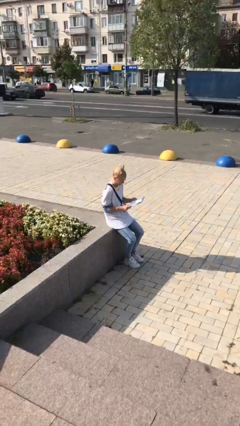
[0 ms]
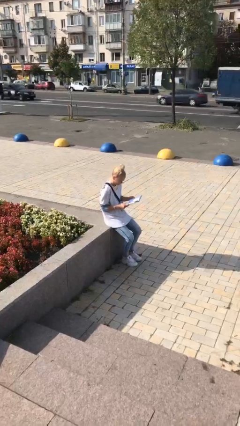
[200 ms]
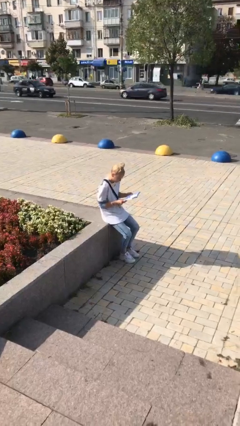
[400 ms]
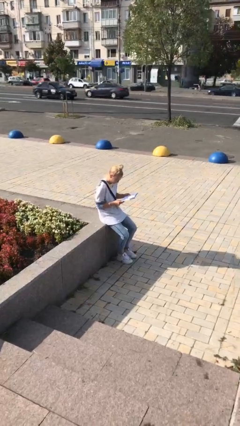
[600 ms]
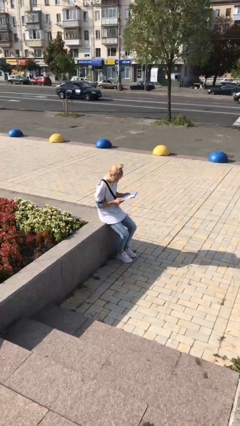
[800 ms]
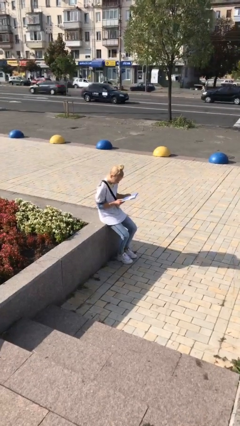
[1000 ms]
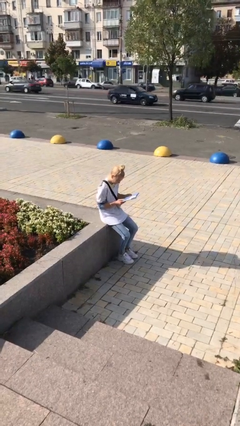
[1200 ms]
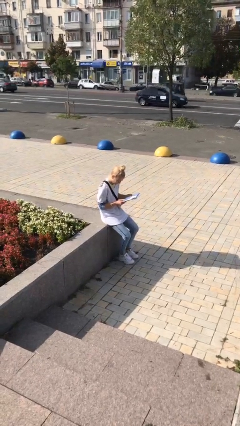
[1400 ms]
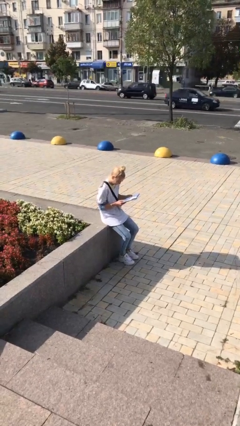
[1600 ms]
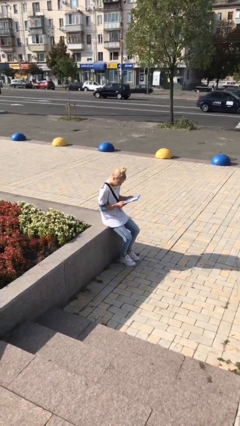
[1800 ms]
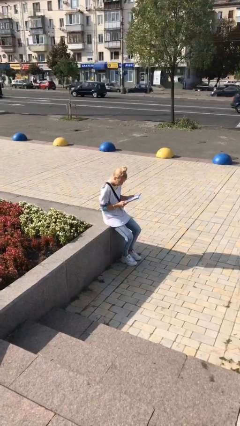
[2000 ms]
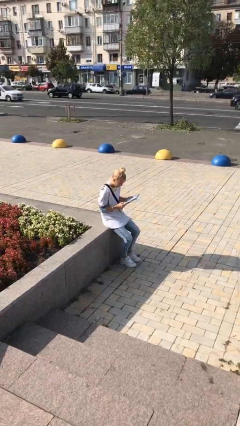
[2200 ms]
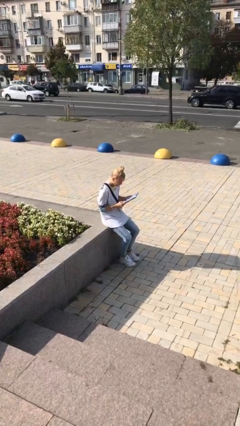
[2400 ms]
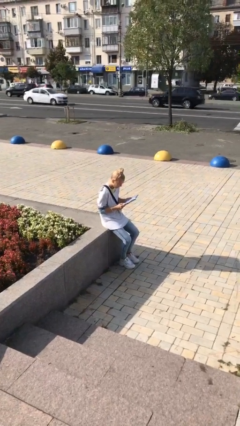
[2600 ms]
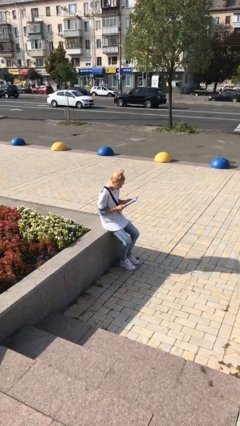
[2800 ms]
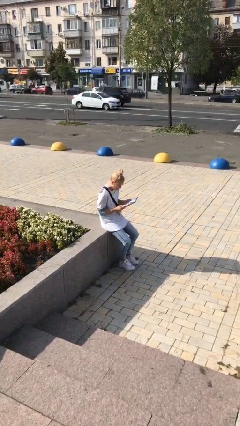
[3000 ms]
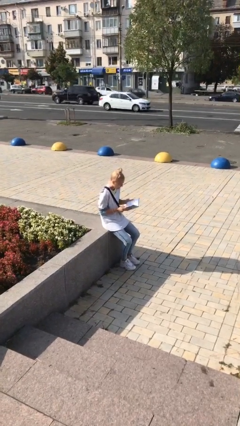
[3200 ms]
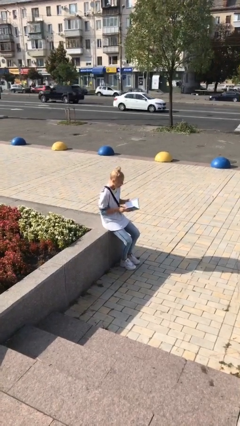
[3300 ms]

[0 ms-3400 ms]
person reads document

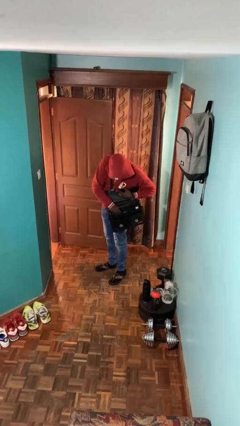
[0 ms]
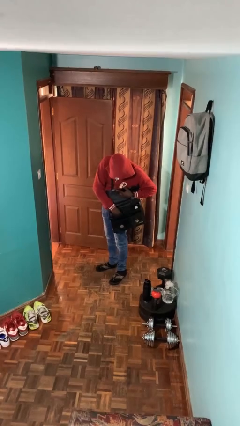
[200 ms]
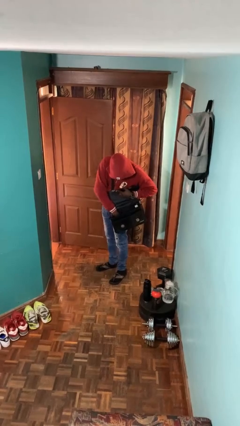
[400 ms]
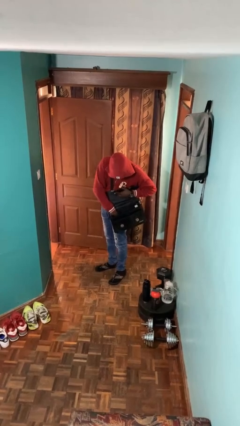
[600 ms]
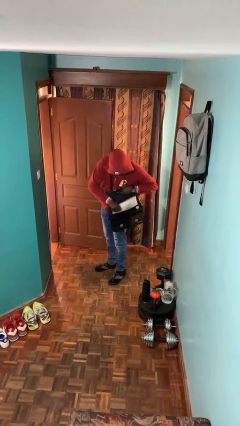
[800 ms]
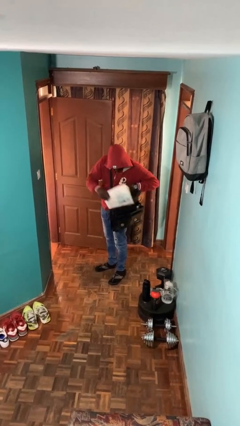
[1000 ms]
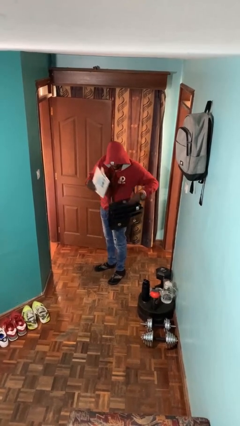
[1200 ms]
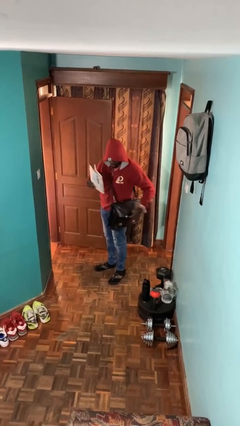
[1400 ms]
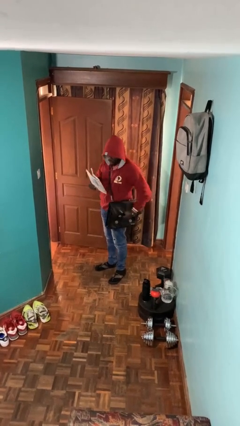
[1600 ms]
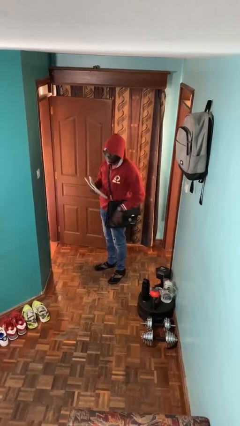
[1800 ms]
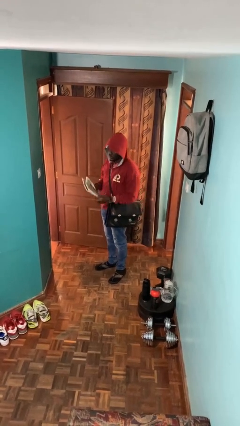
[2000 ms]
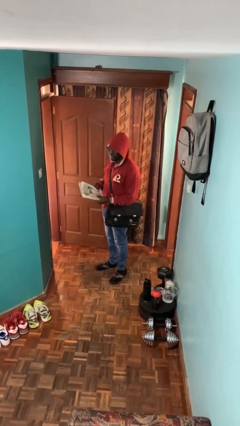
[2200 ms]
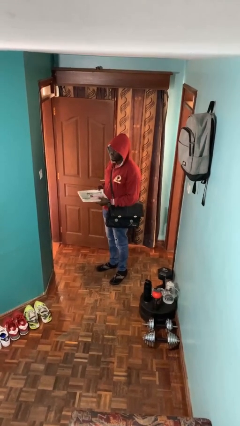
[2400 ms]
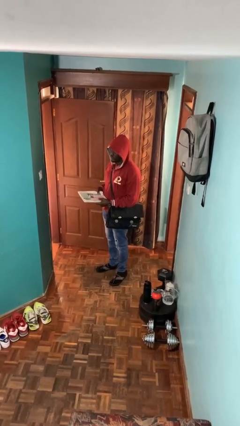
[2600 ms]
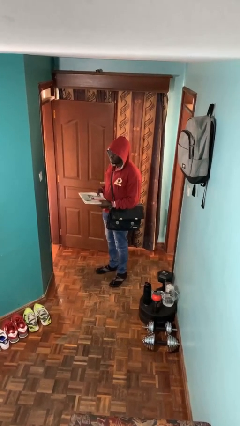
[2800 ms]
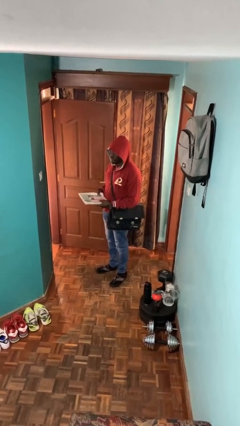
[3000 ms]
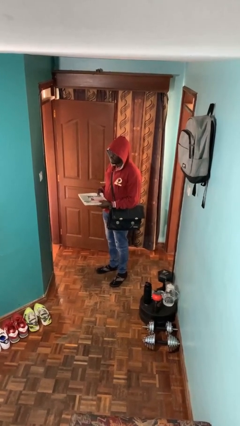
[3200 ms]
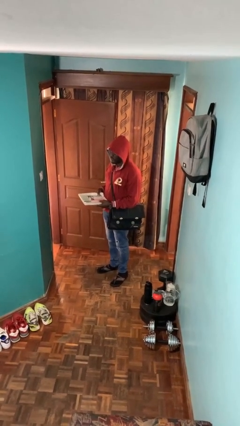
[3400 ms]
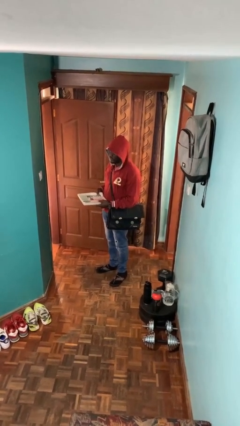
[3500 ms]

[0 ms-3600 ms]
person takes object from purse

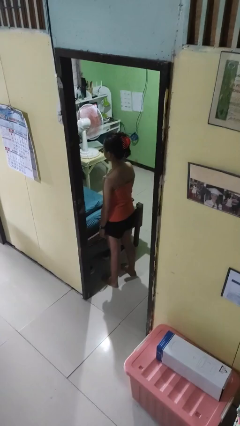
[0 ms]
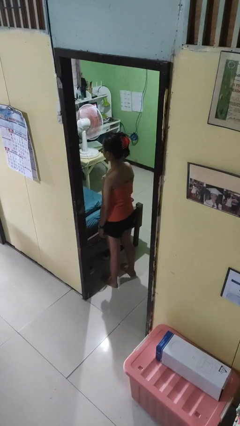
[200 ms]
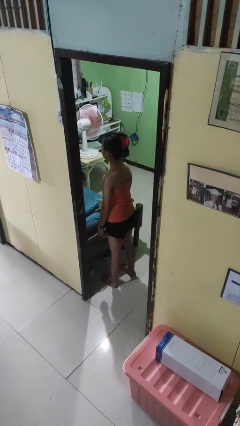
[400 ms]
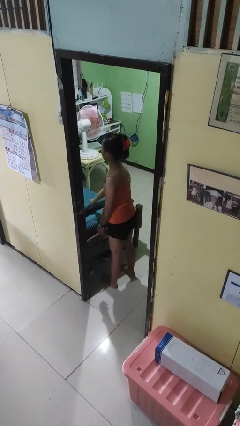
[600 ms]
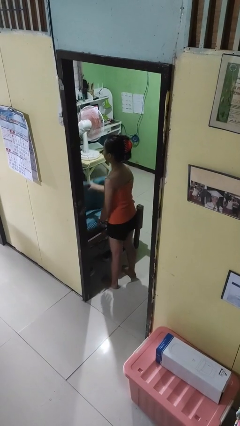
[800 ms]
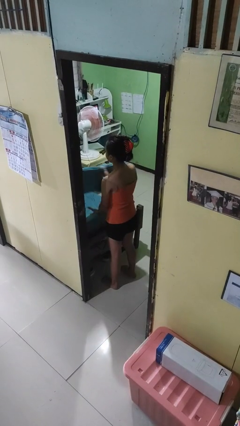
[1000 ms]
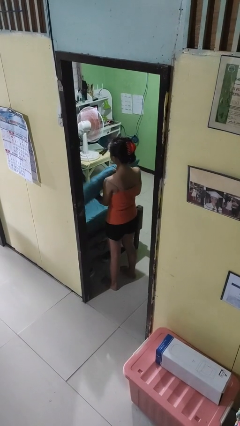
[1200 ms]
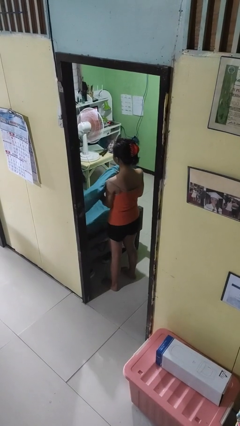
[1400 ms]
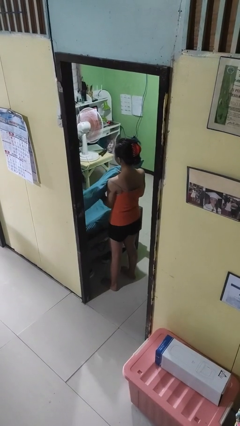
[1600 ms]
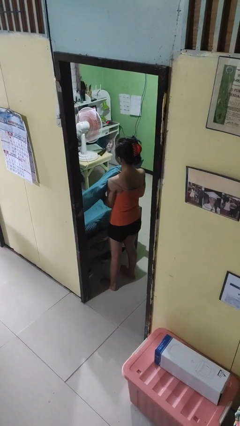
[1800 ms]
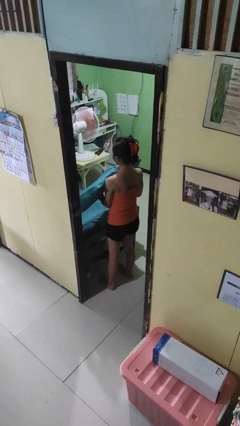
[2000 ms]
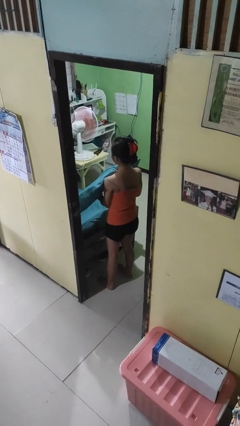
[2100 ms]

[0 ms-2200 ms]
person picks up object from bed

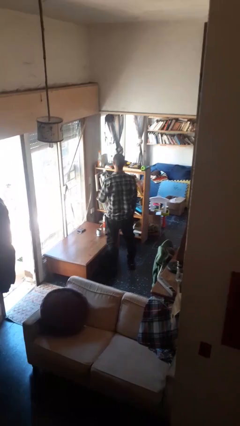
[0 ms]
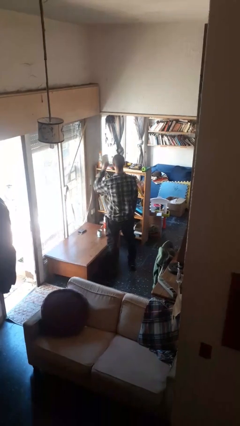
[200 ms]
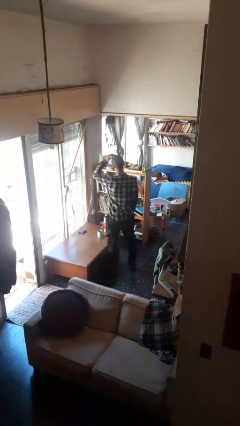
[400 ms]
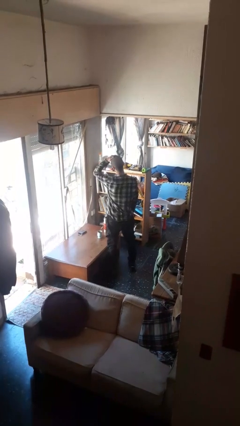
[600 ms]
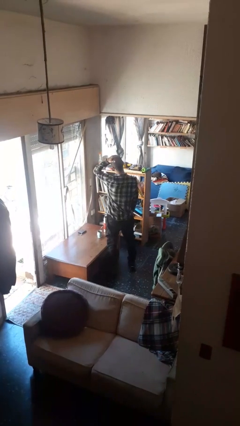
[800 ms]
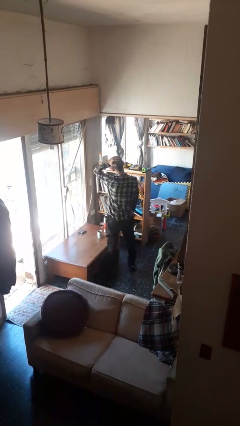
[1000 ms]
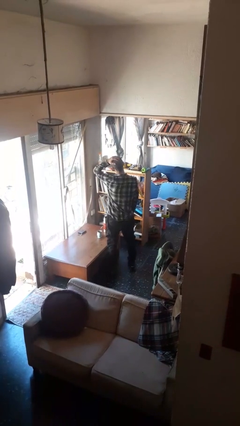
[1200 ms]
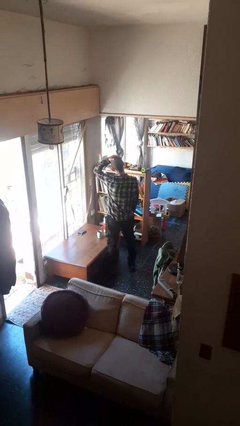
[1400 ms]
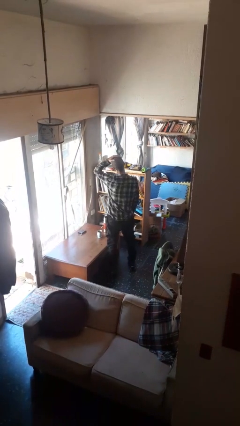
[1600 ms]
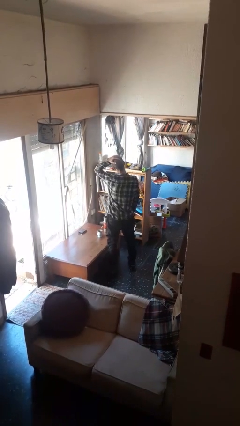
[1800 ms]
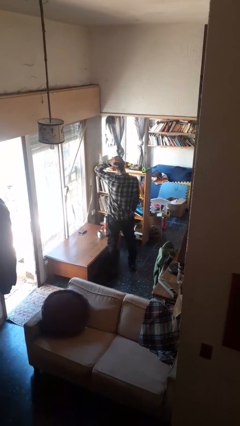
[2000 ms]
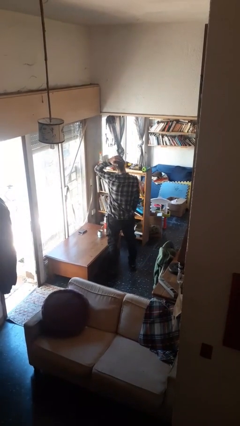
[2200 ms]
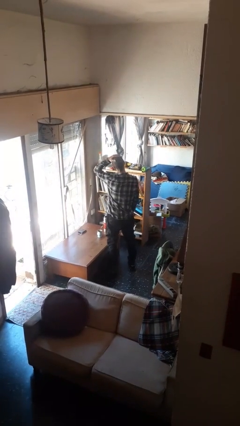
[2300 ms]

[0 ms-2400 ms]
person pats head

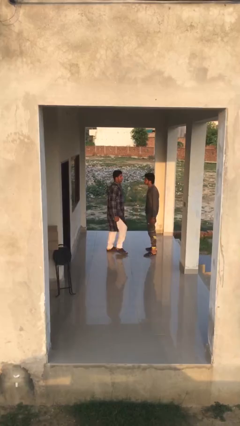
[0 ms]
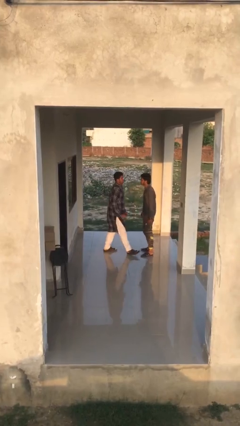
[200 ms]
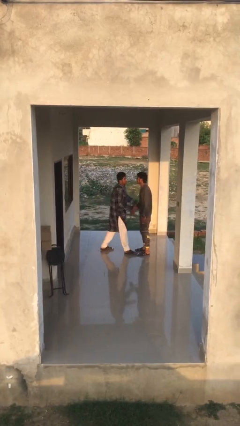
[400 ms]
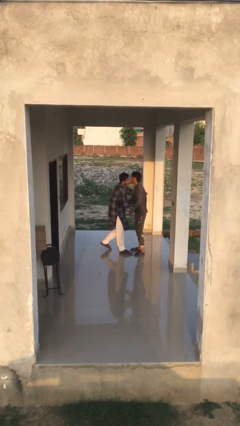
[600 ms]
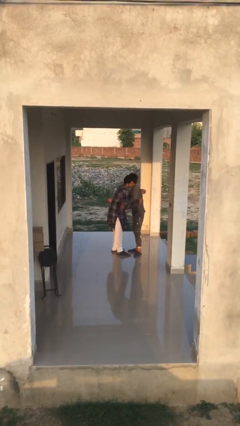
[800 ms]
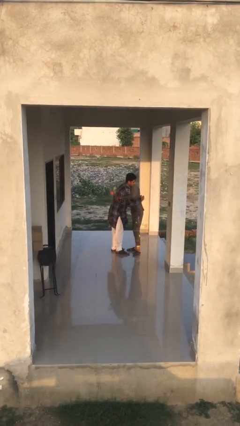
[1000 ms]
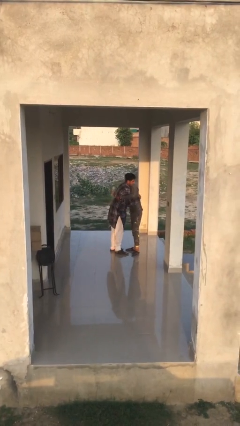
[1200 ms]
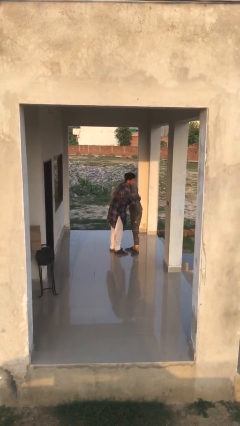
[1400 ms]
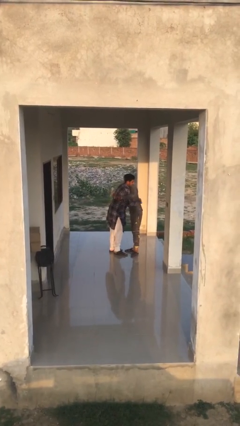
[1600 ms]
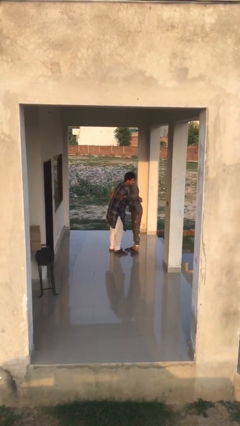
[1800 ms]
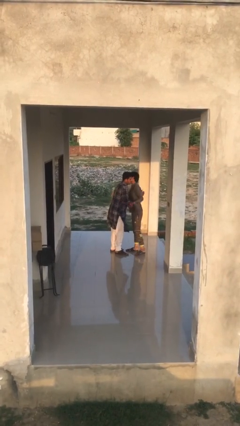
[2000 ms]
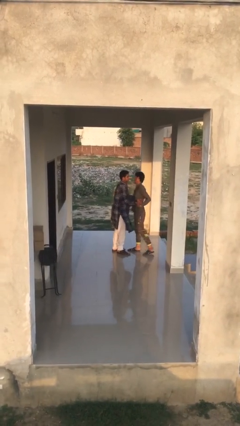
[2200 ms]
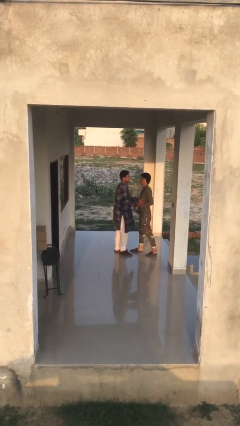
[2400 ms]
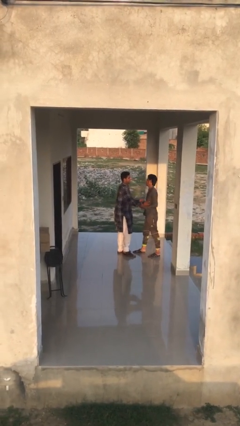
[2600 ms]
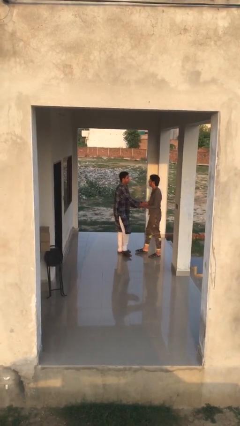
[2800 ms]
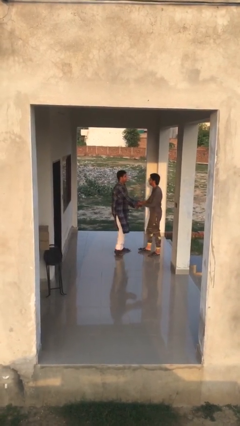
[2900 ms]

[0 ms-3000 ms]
person embraces person

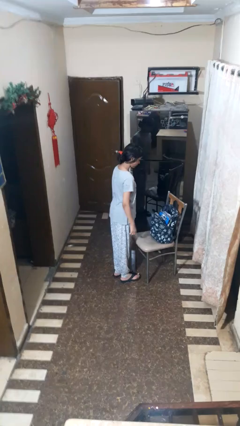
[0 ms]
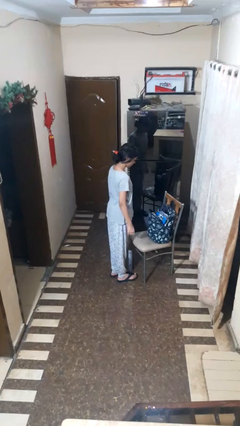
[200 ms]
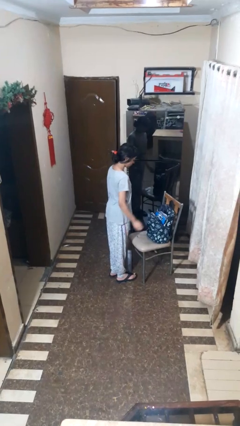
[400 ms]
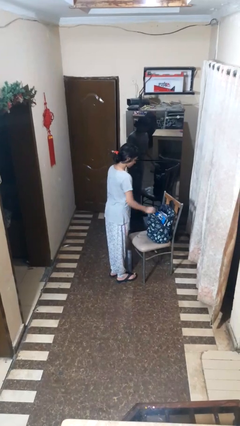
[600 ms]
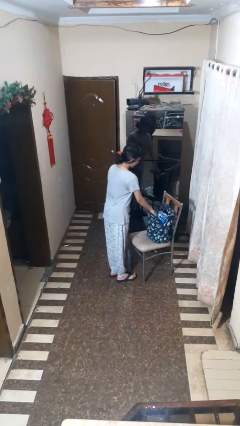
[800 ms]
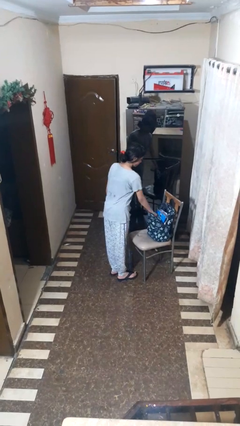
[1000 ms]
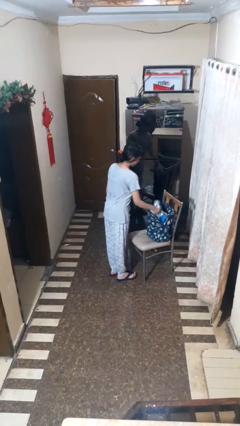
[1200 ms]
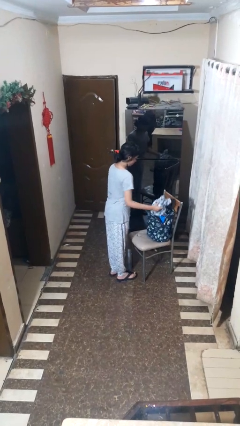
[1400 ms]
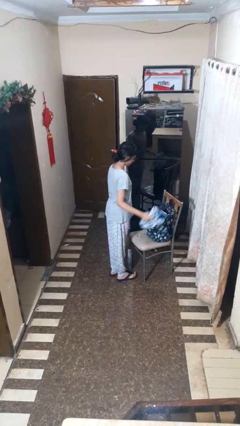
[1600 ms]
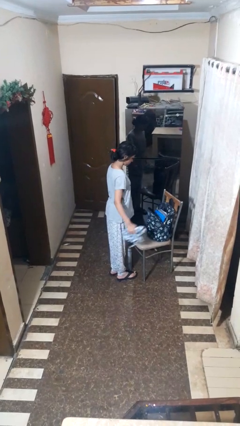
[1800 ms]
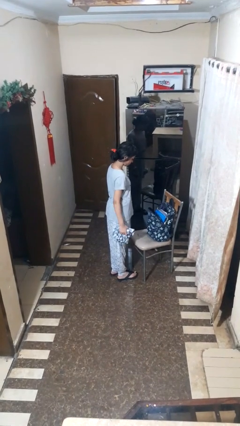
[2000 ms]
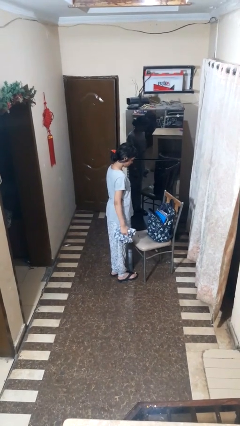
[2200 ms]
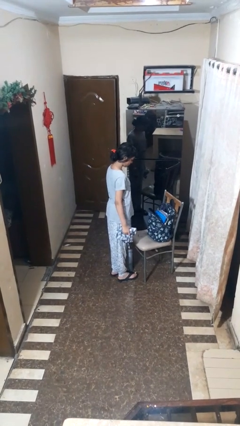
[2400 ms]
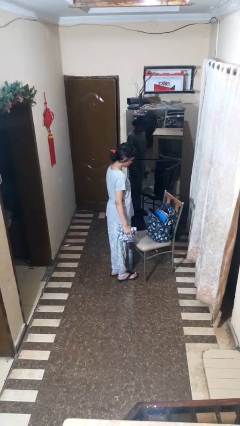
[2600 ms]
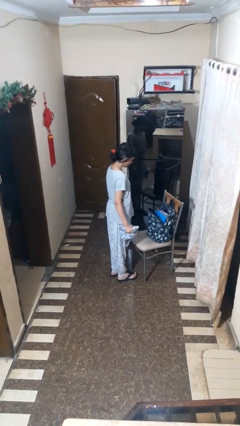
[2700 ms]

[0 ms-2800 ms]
person takes object from bag
